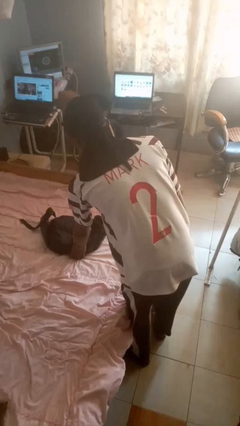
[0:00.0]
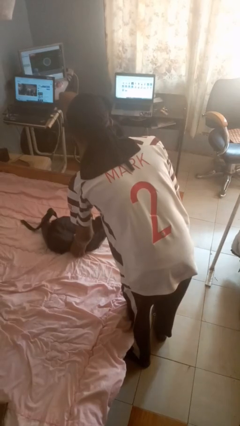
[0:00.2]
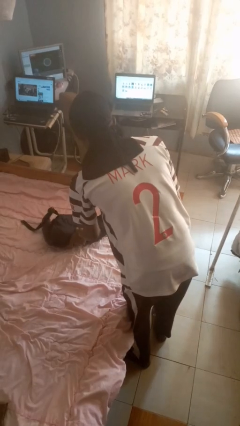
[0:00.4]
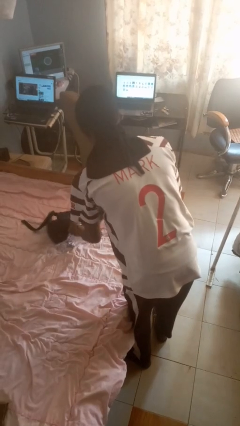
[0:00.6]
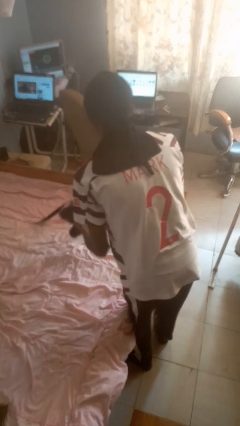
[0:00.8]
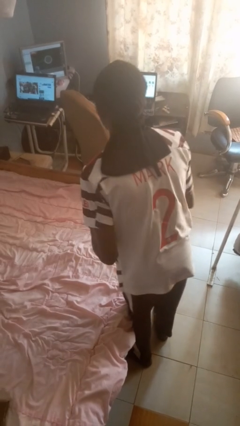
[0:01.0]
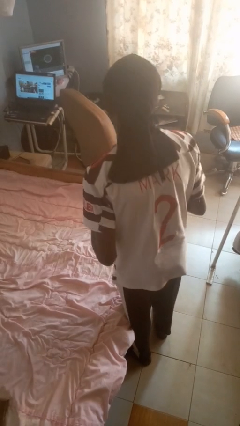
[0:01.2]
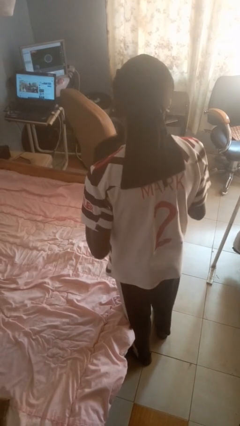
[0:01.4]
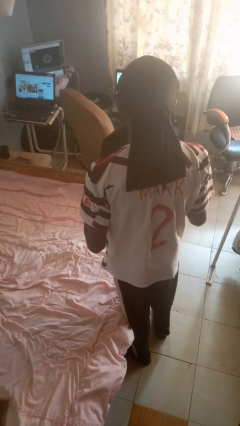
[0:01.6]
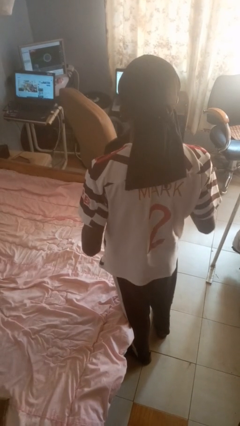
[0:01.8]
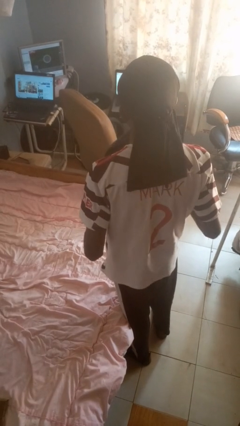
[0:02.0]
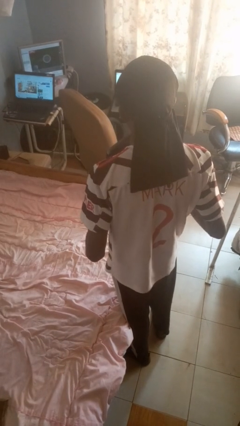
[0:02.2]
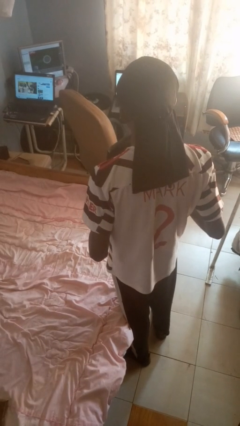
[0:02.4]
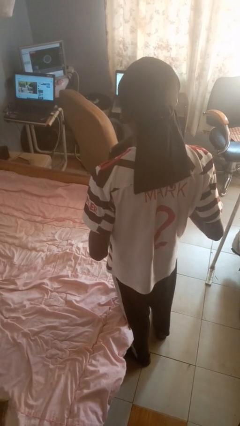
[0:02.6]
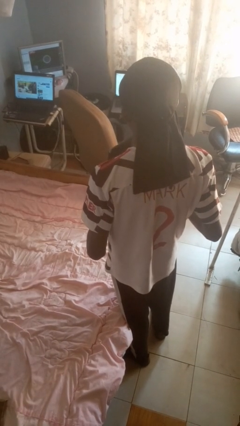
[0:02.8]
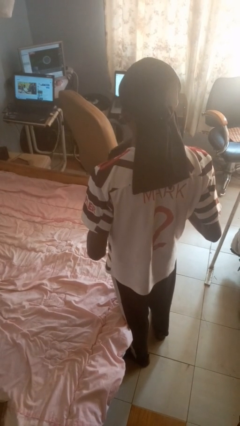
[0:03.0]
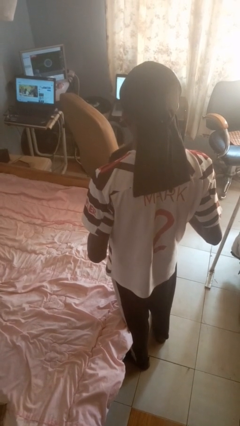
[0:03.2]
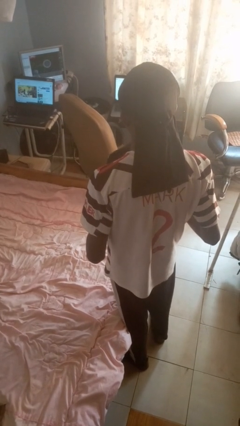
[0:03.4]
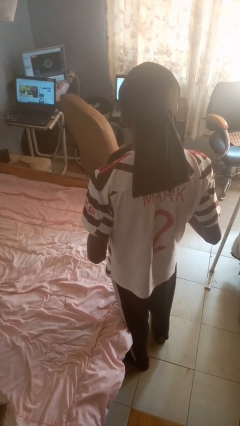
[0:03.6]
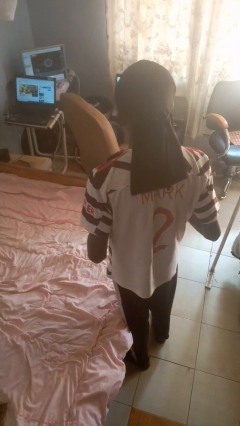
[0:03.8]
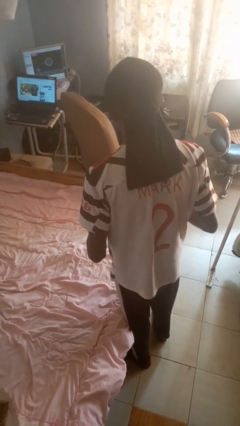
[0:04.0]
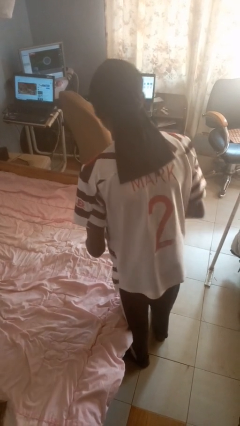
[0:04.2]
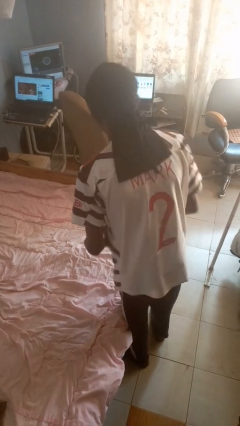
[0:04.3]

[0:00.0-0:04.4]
person picks up object from bed

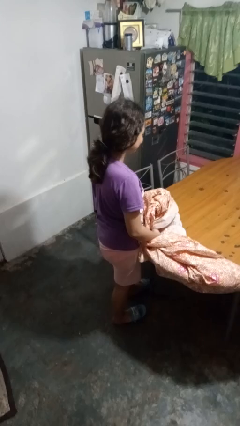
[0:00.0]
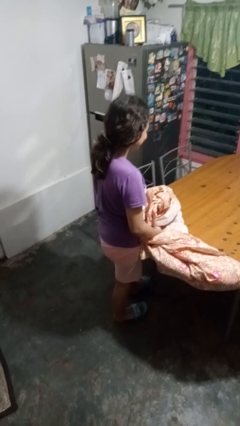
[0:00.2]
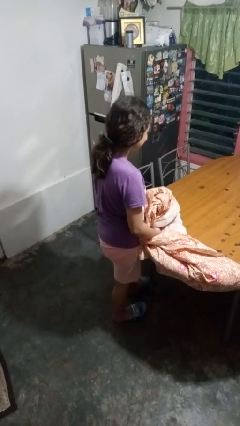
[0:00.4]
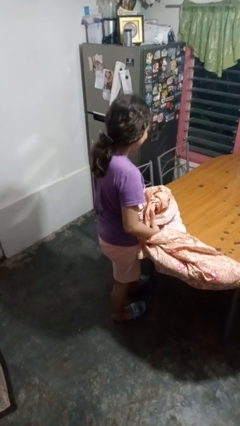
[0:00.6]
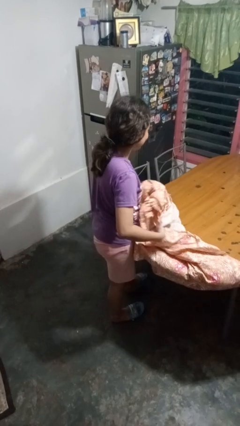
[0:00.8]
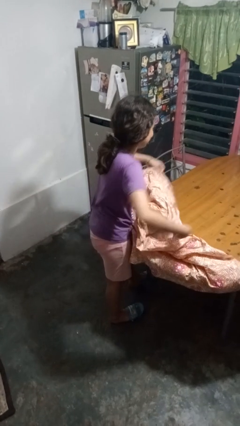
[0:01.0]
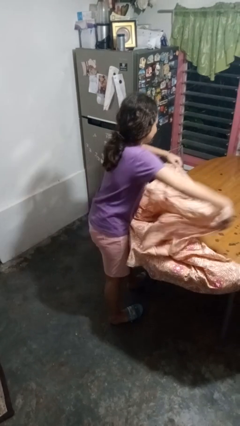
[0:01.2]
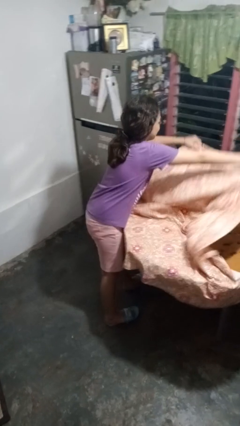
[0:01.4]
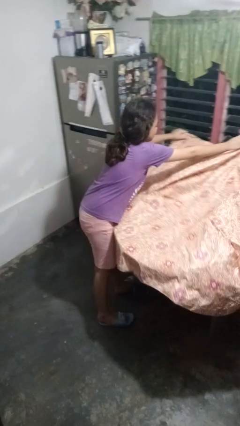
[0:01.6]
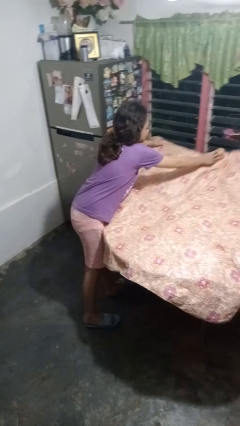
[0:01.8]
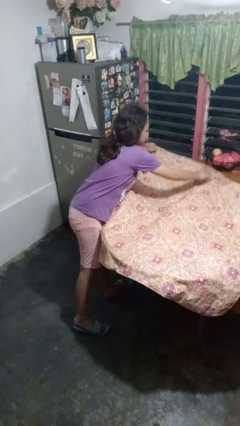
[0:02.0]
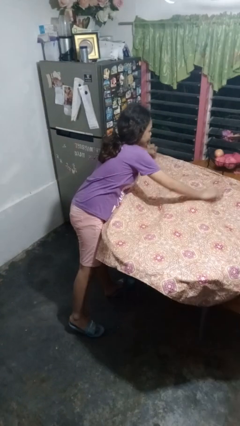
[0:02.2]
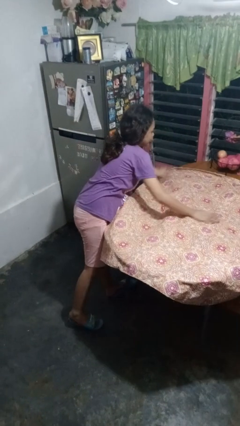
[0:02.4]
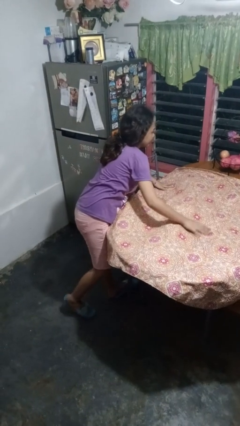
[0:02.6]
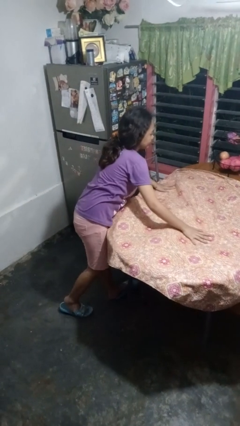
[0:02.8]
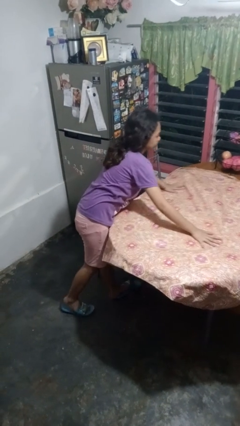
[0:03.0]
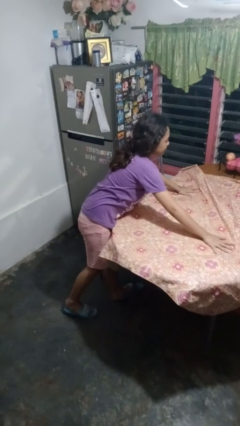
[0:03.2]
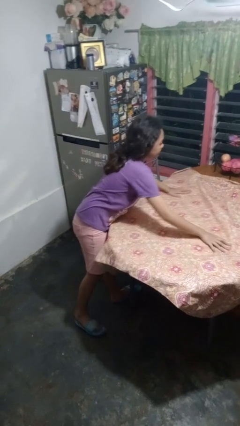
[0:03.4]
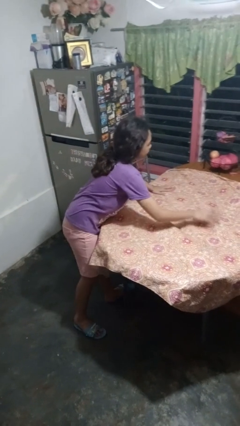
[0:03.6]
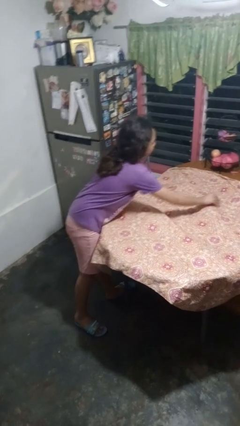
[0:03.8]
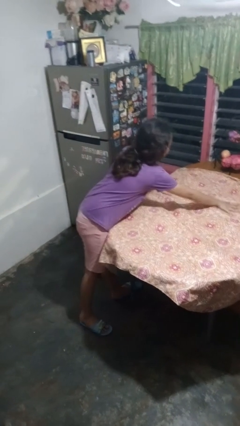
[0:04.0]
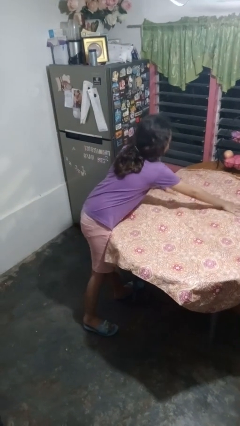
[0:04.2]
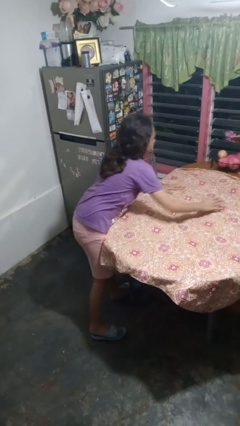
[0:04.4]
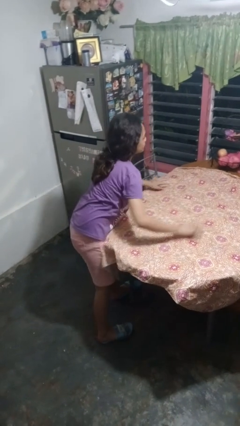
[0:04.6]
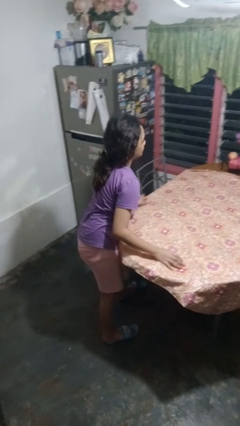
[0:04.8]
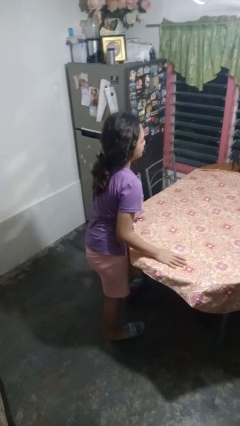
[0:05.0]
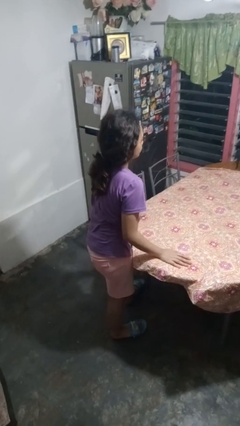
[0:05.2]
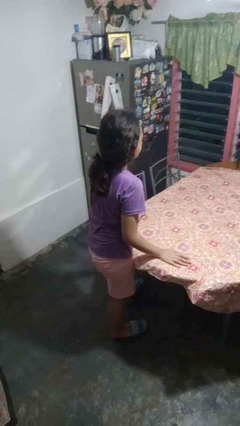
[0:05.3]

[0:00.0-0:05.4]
person spreads tablecloth

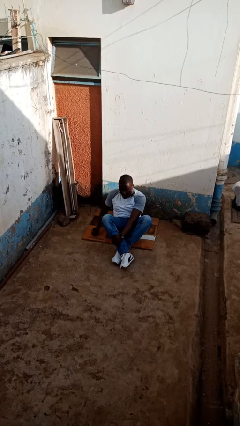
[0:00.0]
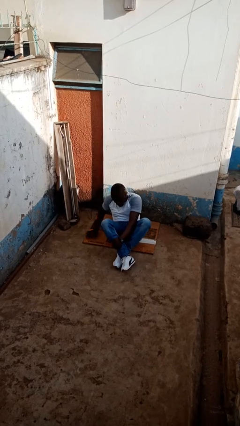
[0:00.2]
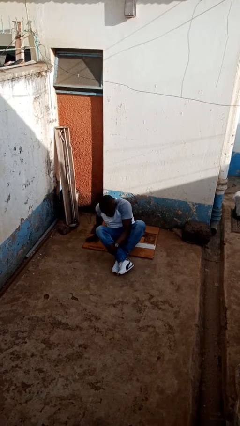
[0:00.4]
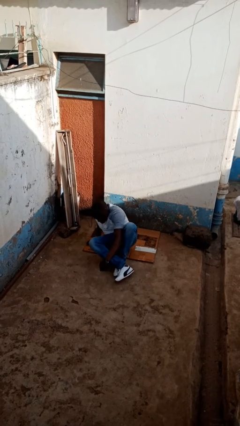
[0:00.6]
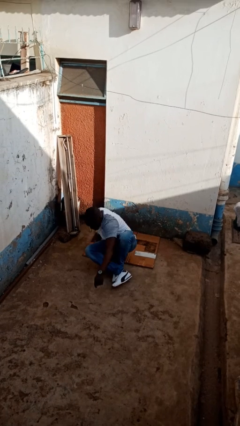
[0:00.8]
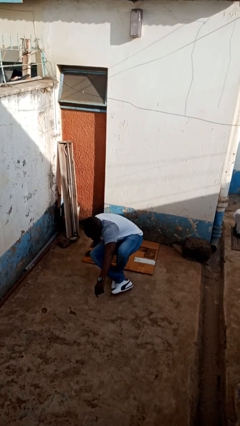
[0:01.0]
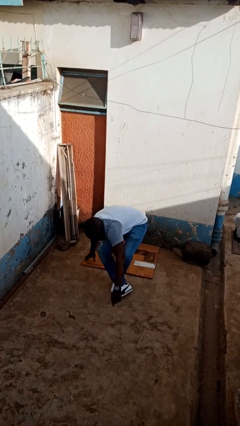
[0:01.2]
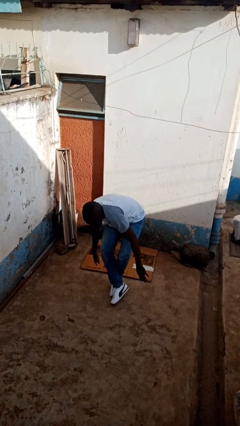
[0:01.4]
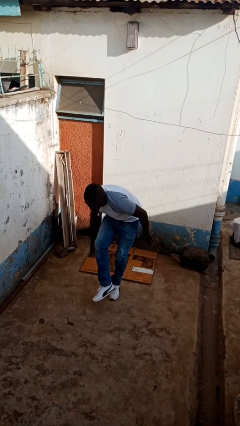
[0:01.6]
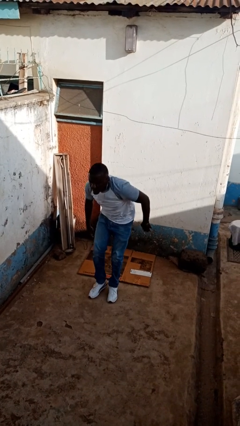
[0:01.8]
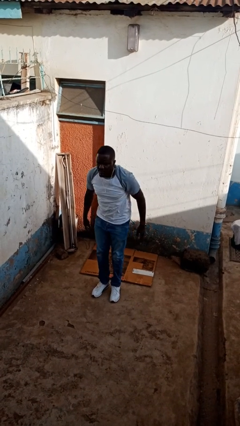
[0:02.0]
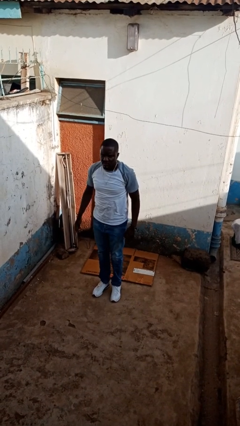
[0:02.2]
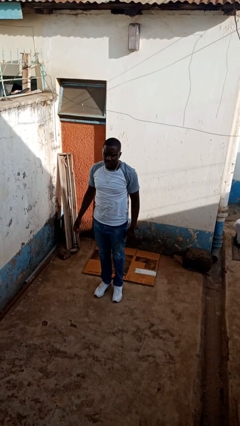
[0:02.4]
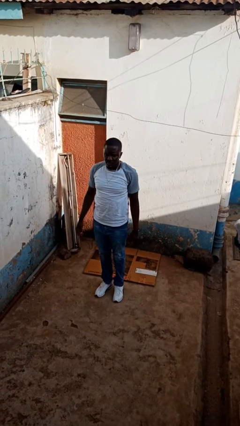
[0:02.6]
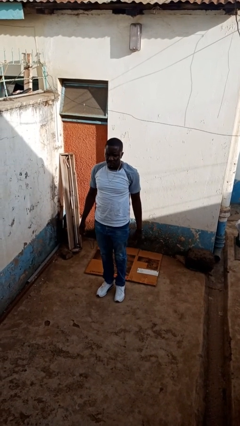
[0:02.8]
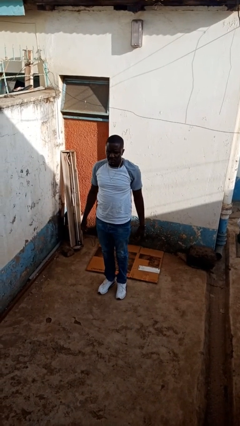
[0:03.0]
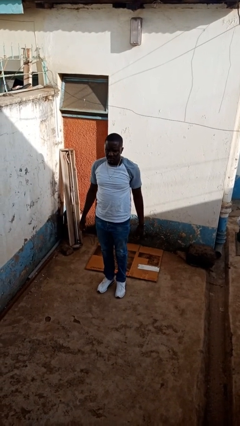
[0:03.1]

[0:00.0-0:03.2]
person stands up from floor

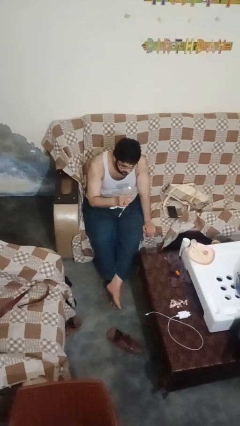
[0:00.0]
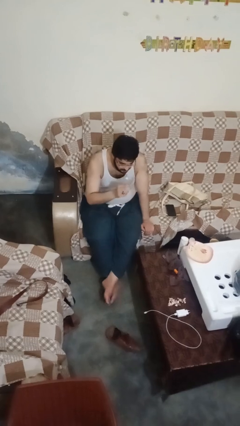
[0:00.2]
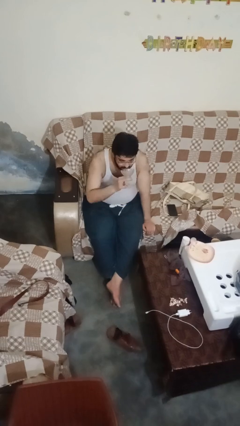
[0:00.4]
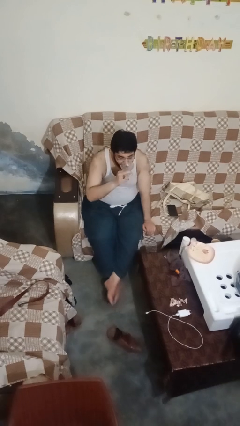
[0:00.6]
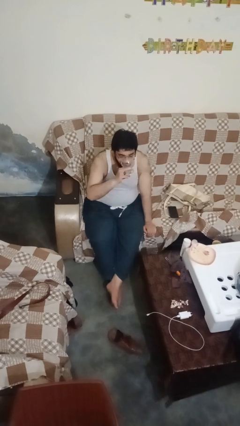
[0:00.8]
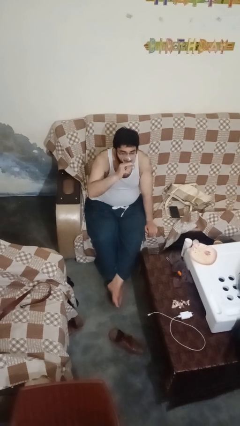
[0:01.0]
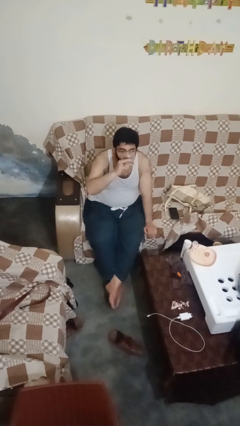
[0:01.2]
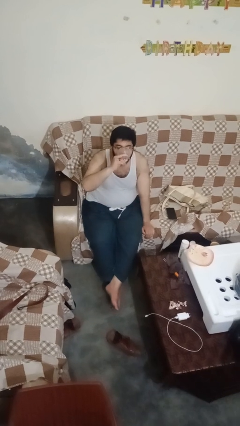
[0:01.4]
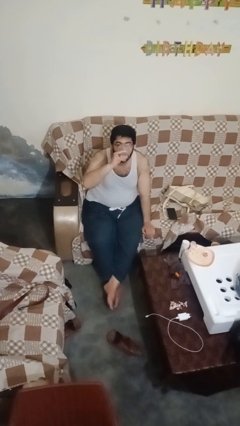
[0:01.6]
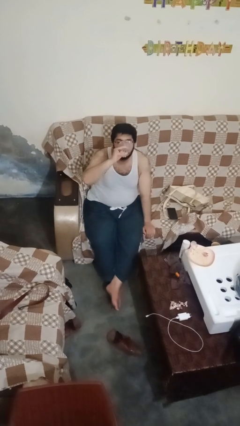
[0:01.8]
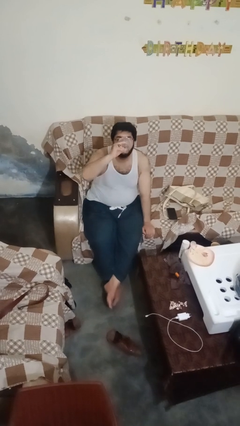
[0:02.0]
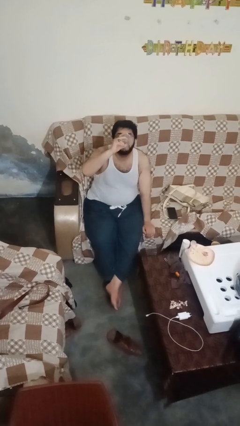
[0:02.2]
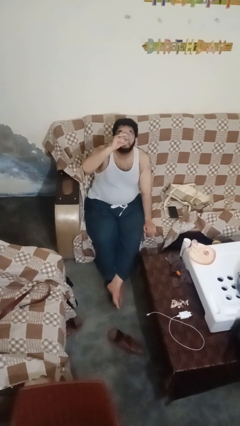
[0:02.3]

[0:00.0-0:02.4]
person drinks from shotglass

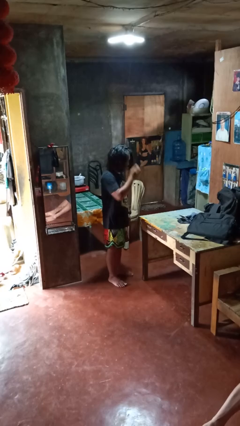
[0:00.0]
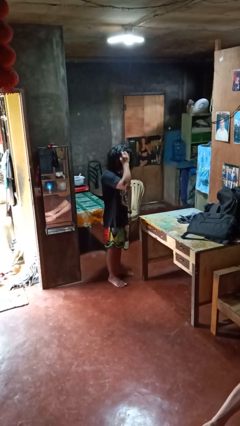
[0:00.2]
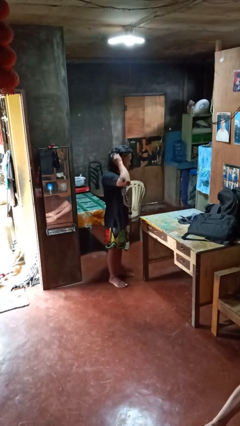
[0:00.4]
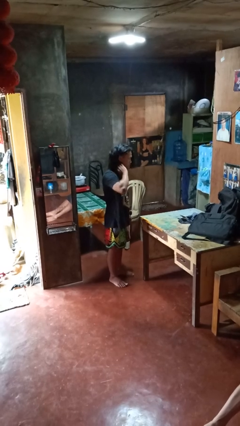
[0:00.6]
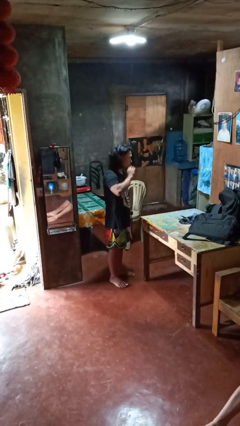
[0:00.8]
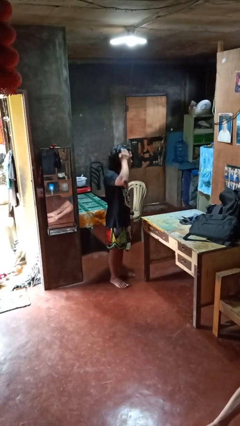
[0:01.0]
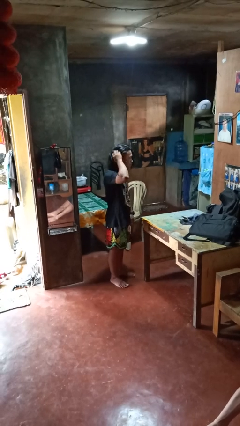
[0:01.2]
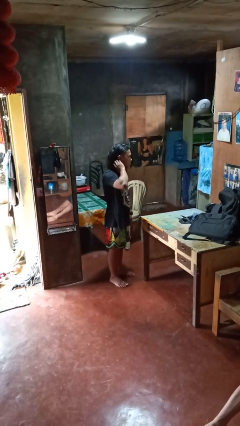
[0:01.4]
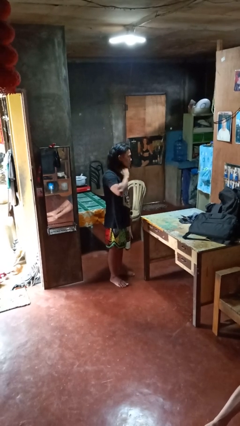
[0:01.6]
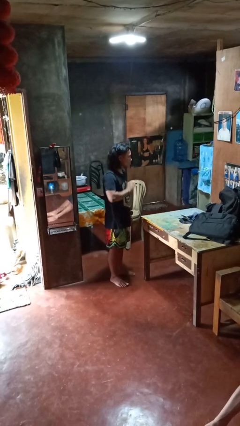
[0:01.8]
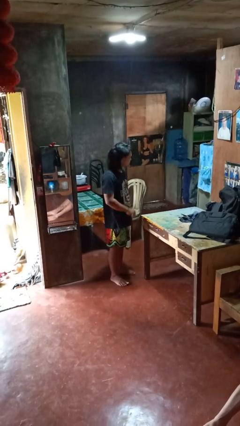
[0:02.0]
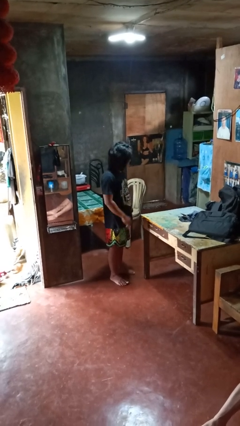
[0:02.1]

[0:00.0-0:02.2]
person strokes hair
